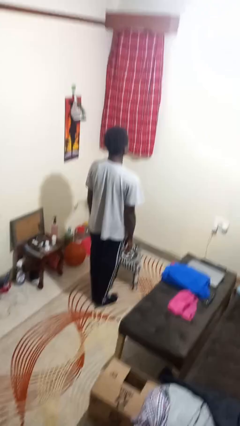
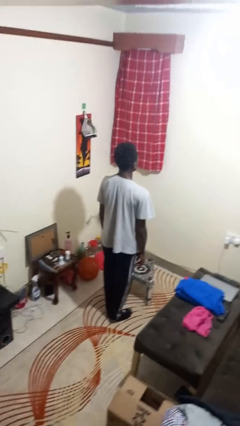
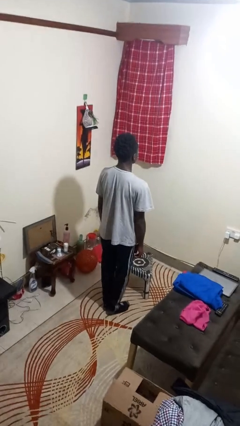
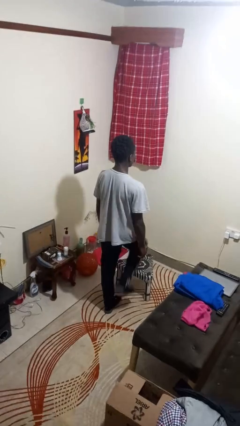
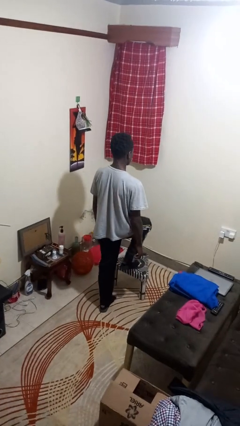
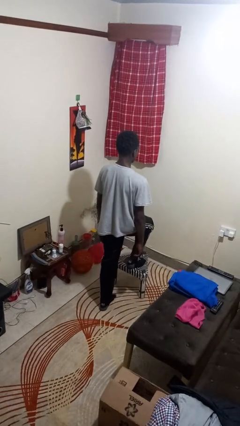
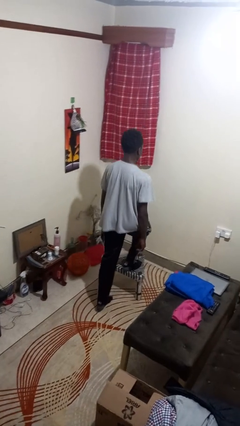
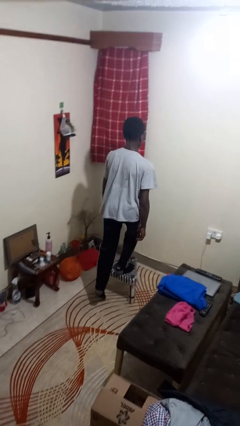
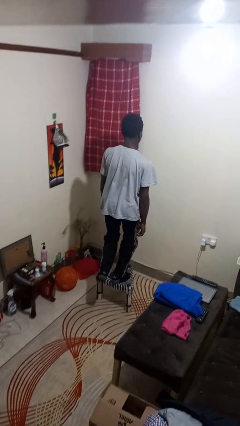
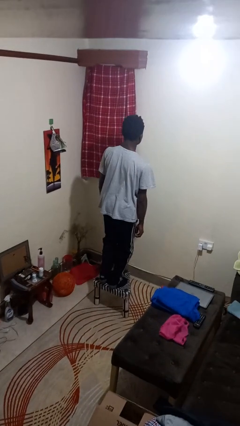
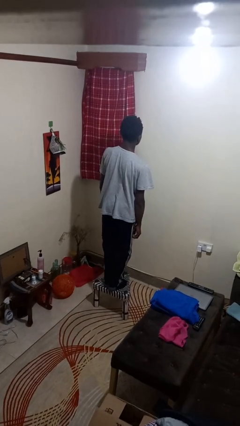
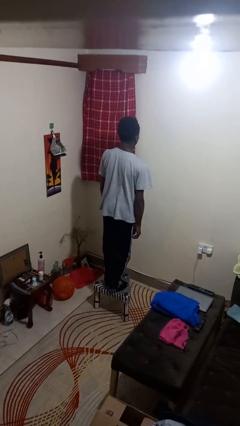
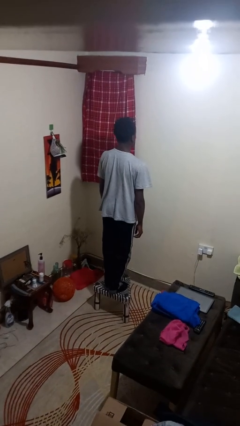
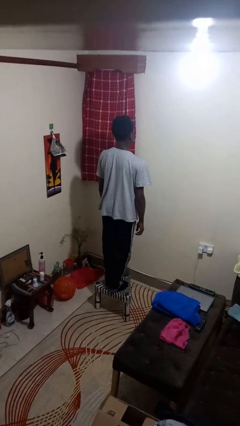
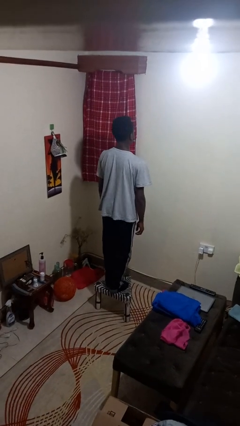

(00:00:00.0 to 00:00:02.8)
person climbs on chair

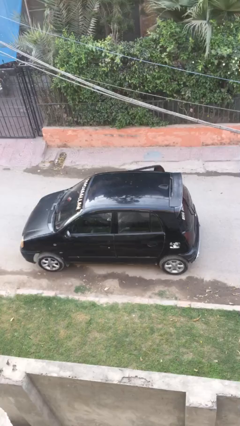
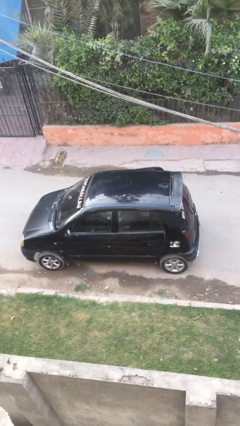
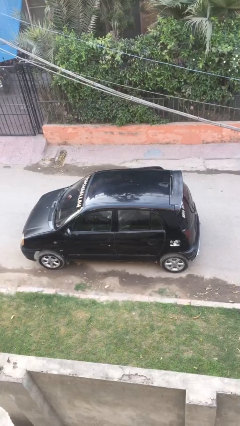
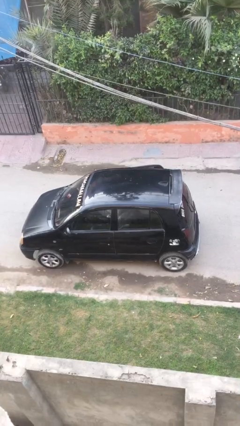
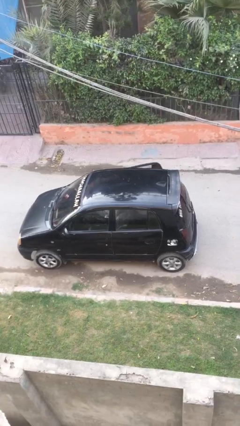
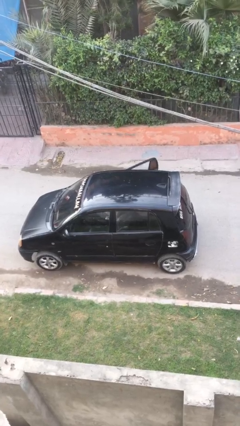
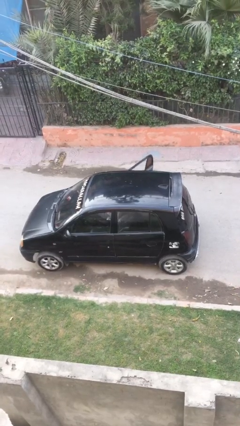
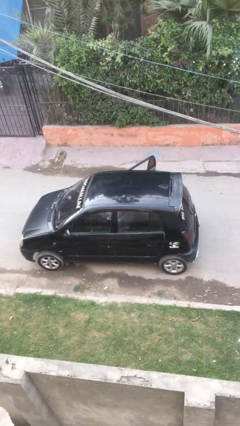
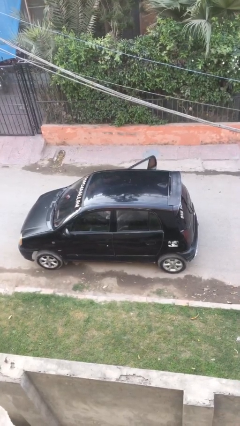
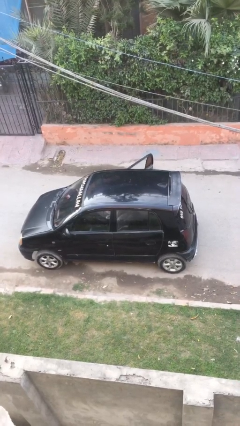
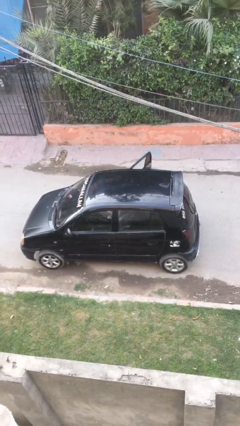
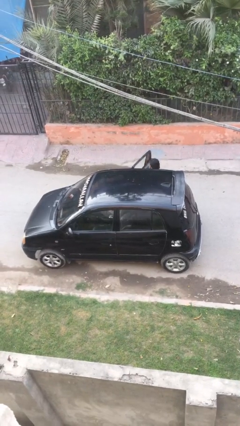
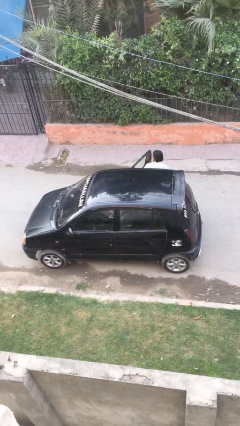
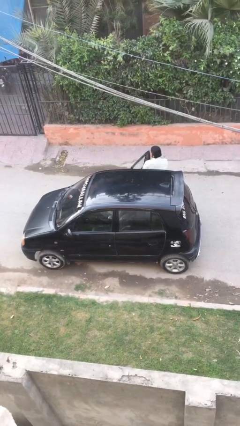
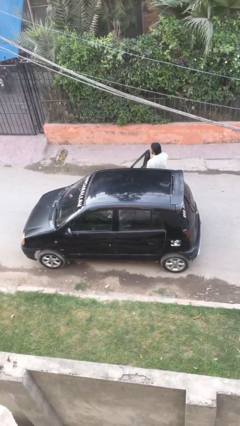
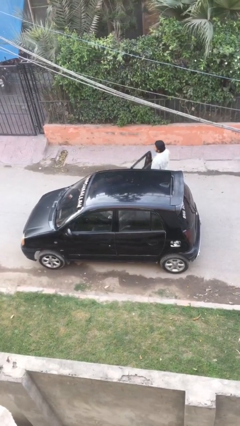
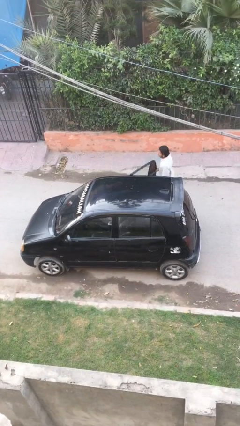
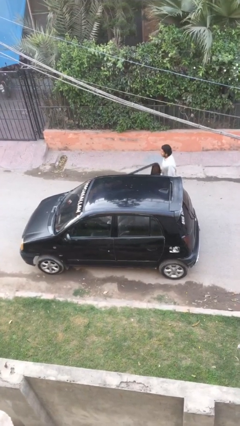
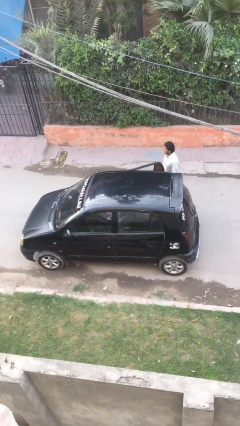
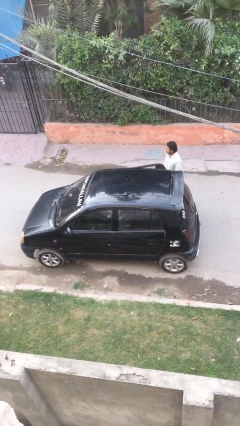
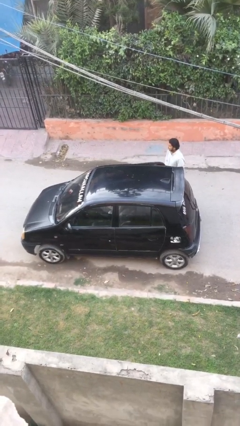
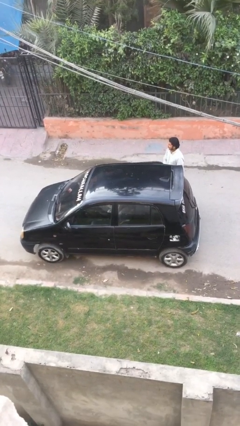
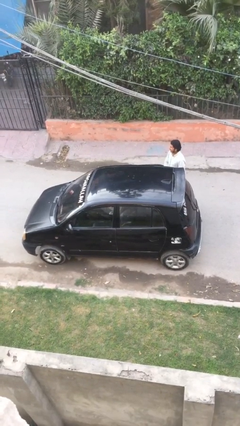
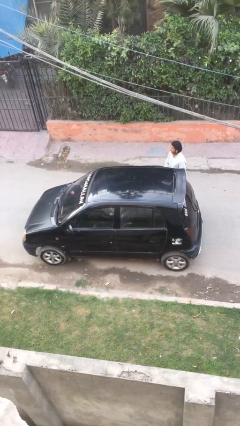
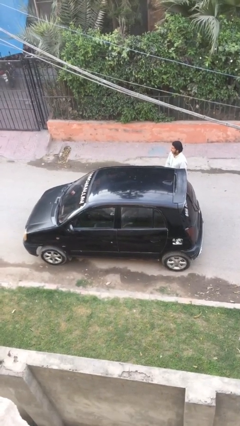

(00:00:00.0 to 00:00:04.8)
car drops off person

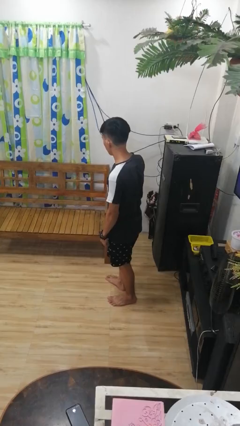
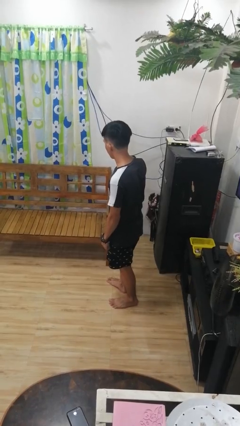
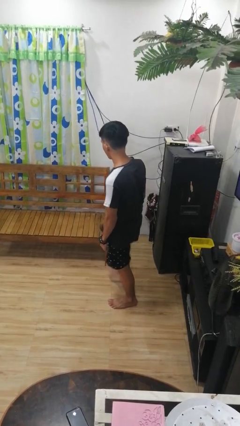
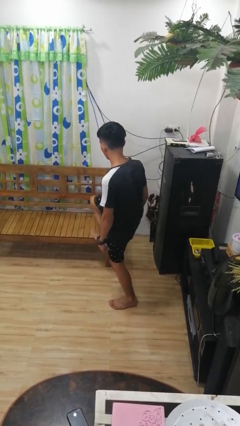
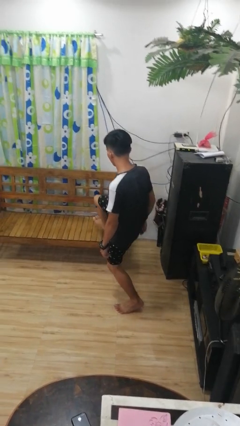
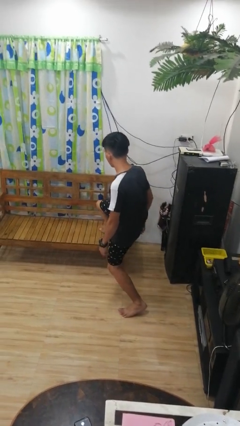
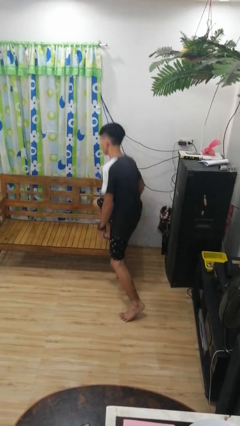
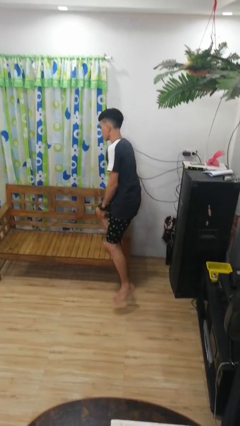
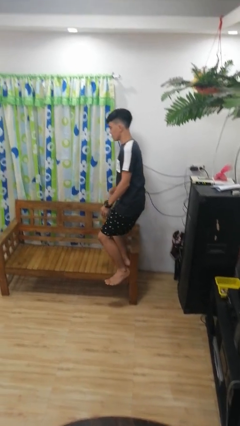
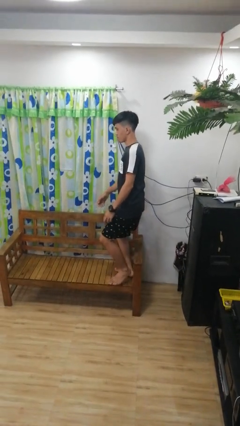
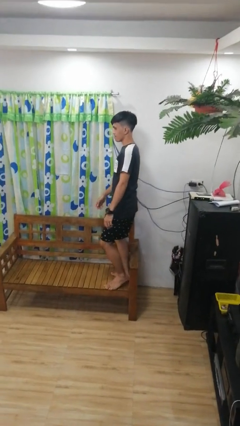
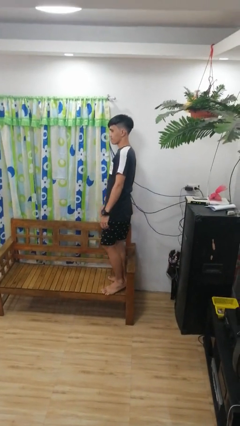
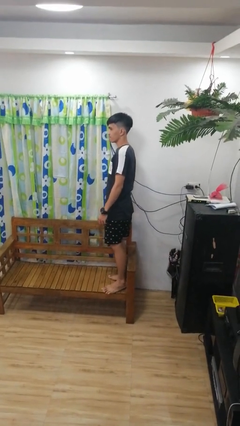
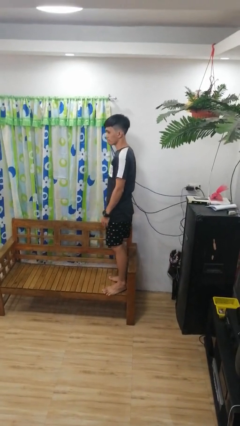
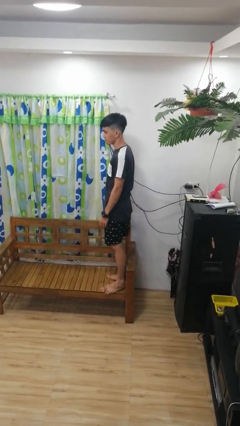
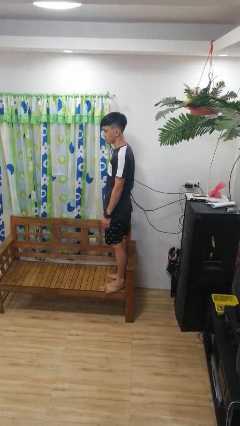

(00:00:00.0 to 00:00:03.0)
person climbs on couch

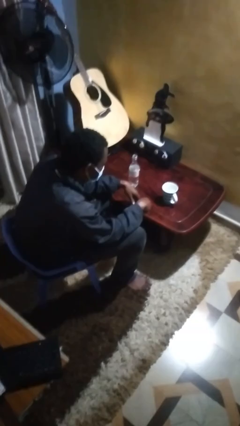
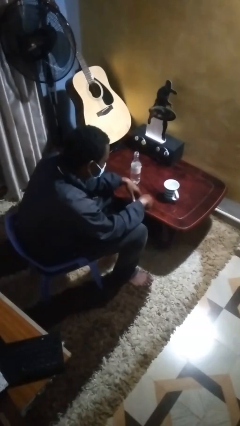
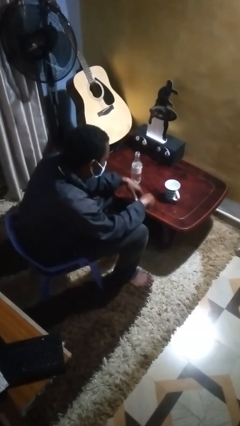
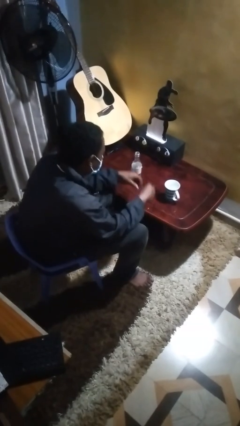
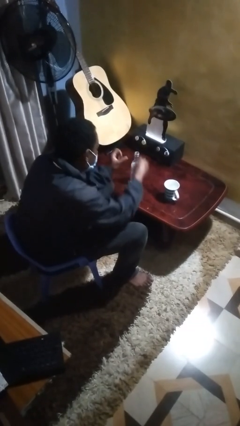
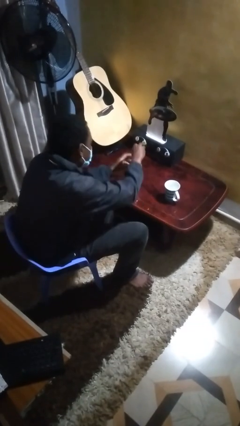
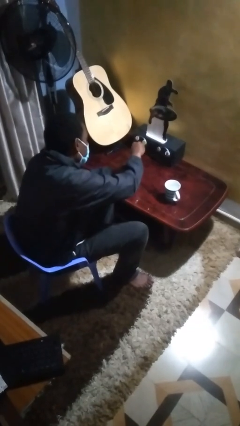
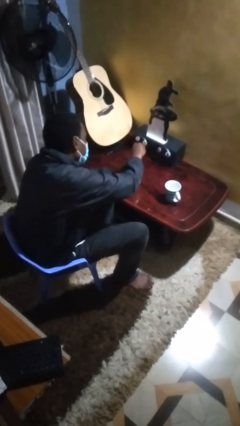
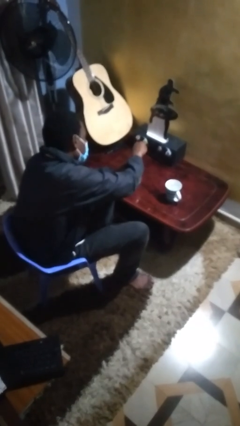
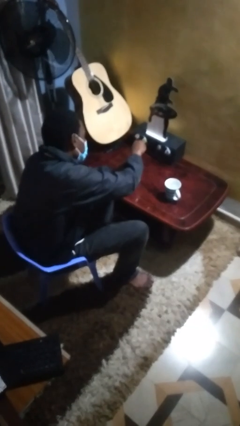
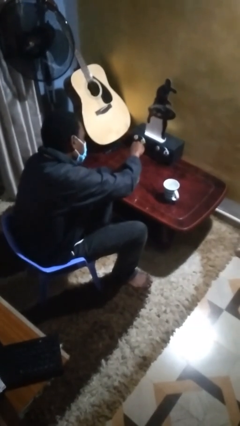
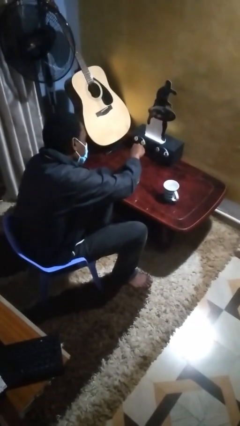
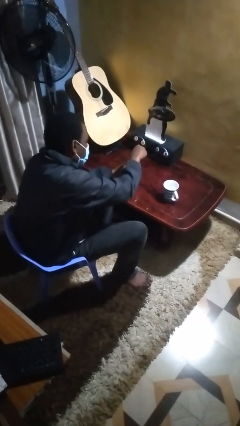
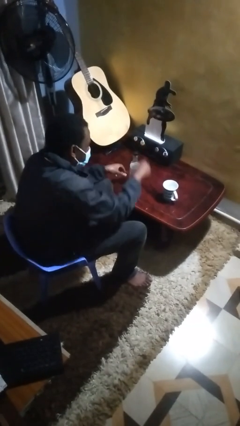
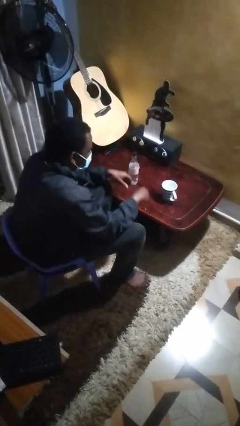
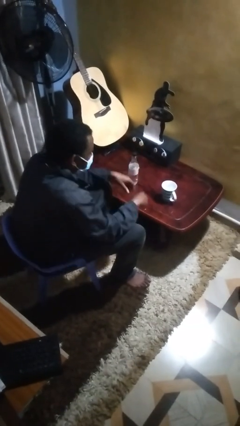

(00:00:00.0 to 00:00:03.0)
person screws lid to bottle

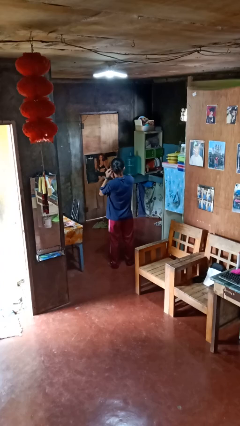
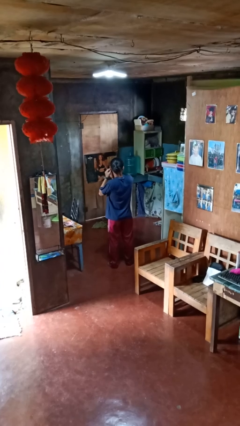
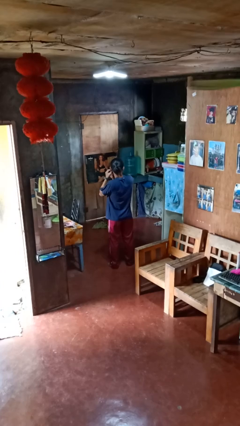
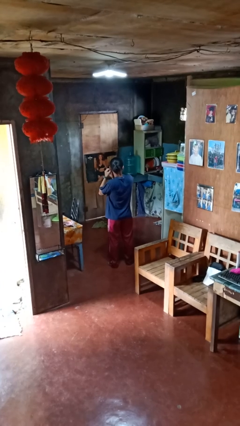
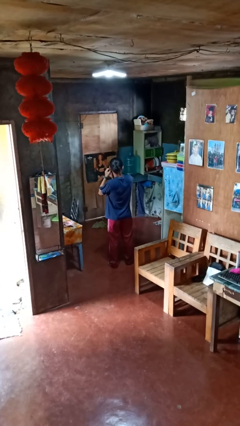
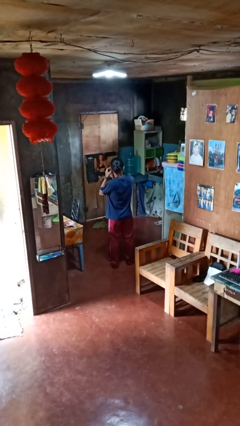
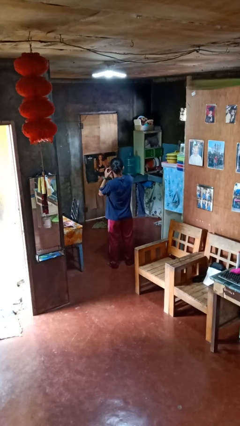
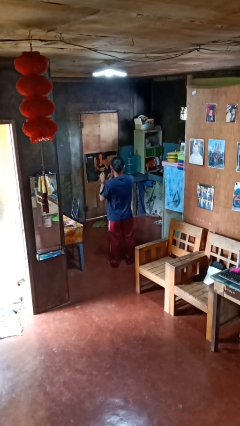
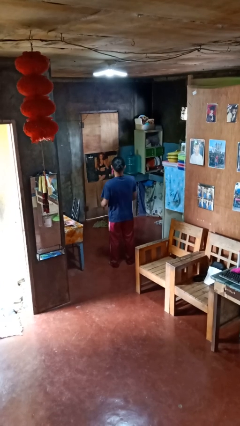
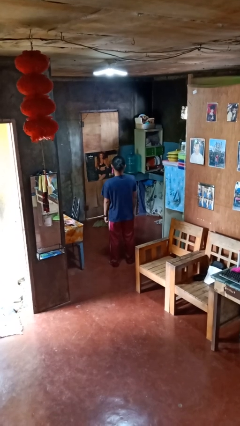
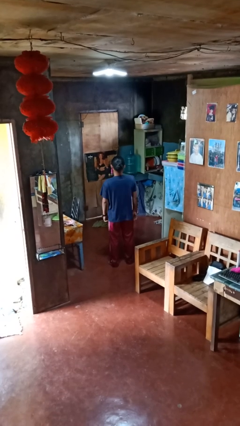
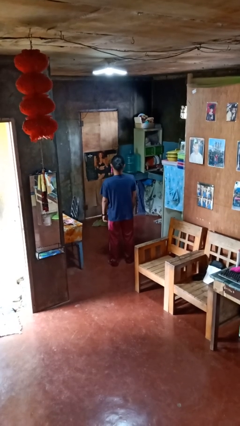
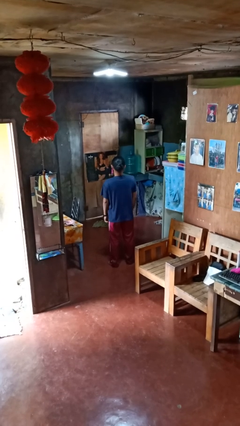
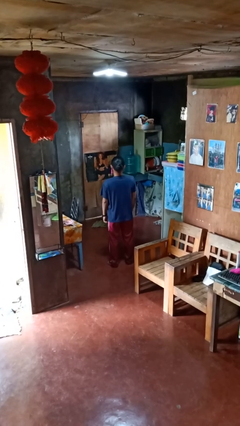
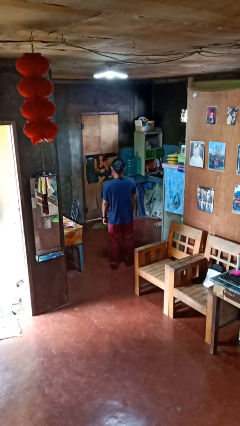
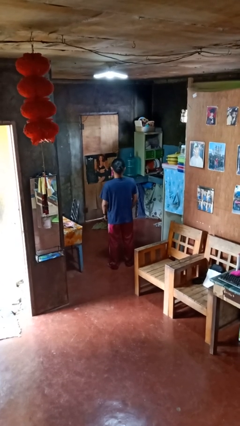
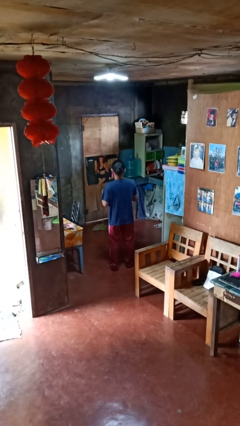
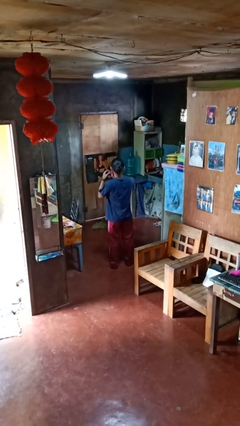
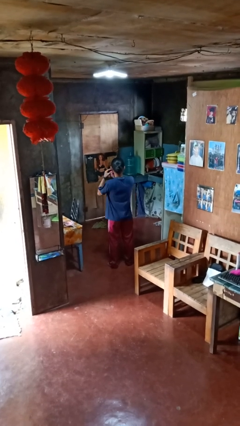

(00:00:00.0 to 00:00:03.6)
person puts on earrings

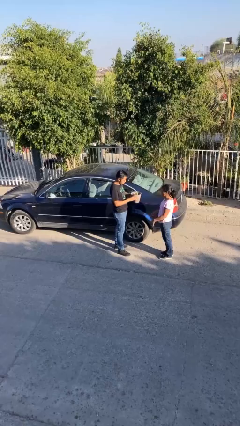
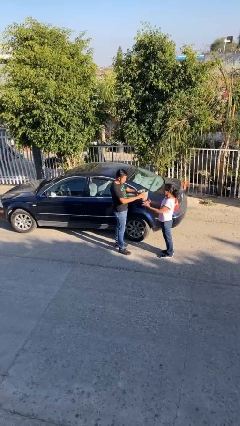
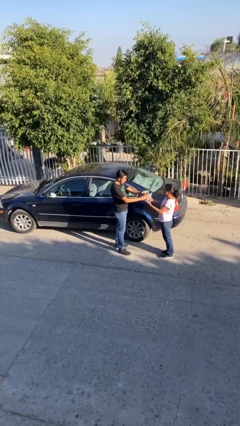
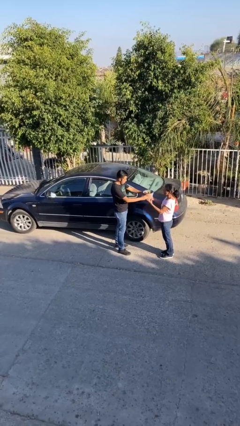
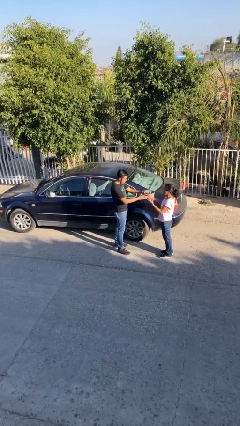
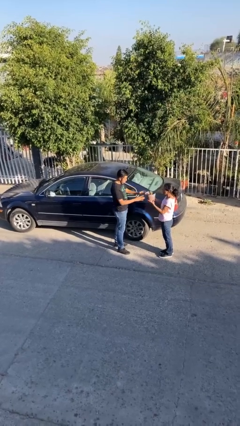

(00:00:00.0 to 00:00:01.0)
person transfers object to person
